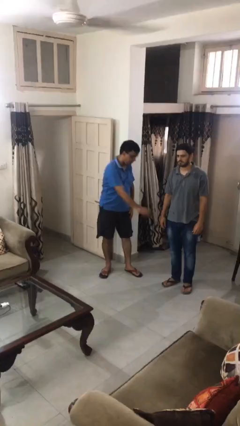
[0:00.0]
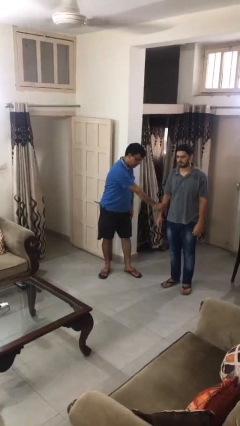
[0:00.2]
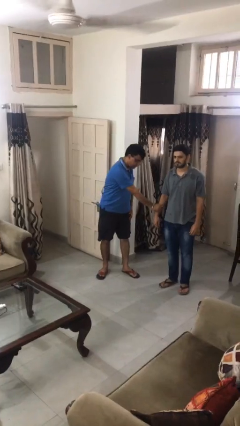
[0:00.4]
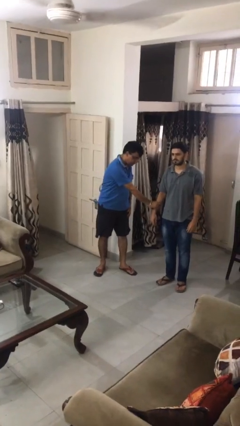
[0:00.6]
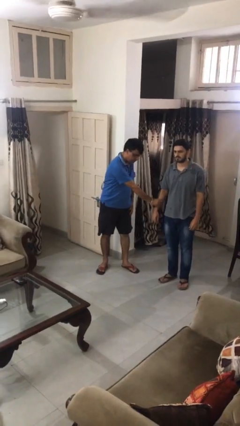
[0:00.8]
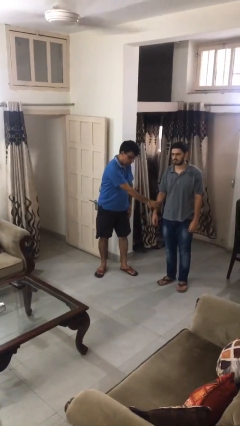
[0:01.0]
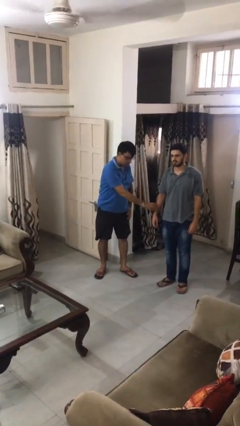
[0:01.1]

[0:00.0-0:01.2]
person grabs person by forearm

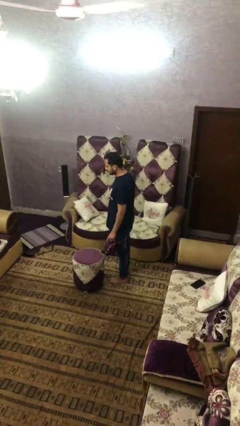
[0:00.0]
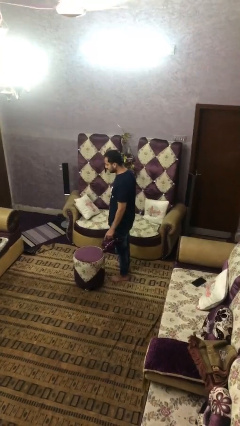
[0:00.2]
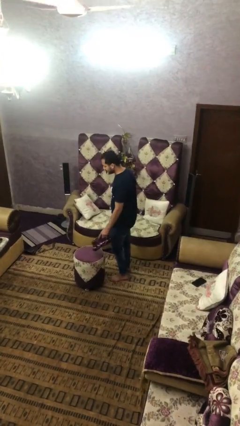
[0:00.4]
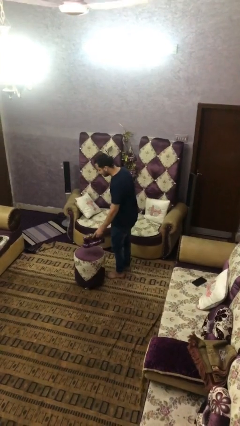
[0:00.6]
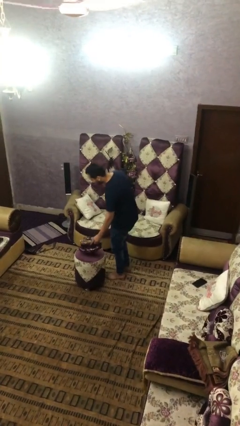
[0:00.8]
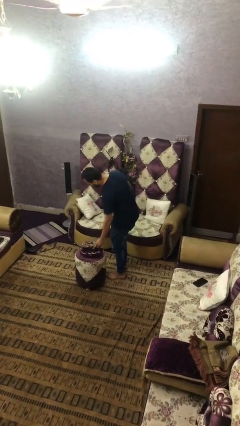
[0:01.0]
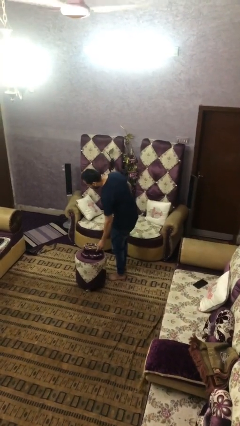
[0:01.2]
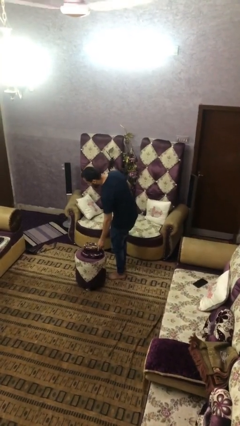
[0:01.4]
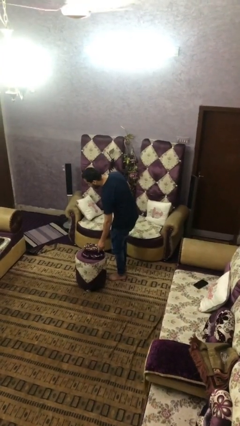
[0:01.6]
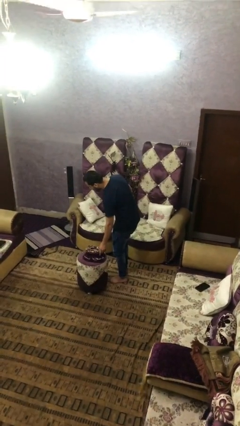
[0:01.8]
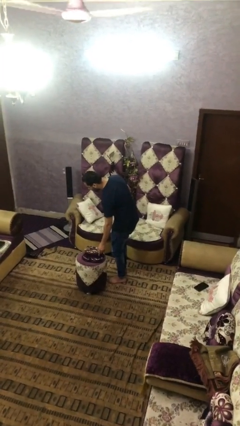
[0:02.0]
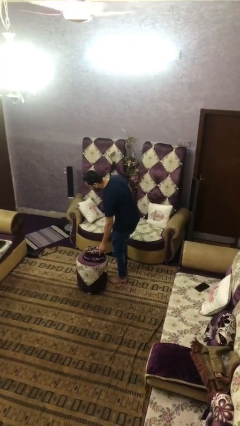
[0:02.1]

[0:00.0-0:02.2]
person puts down object on table

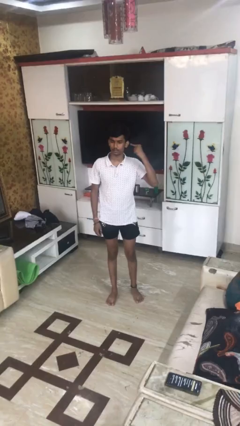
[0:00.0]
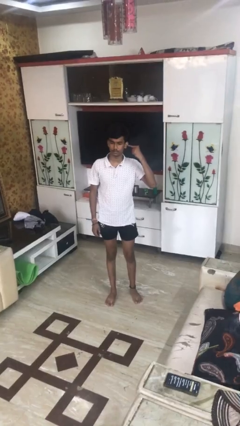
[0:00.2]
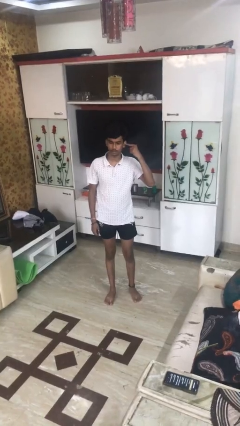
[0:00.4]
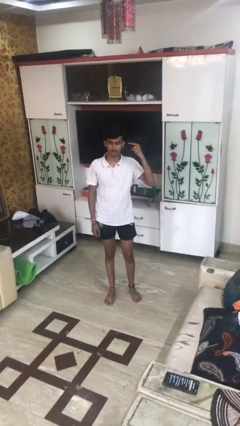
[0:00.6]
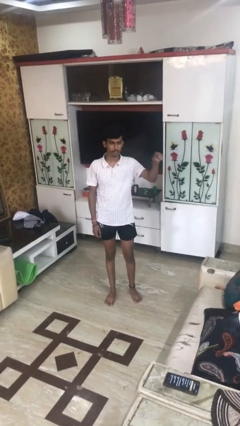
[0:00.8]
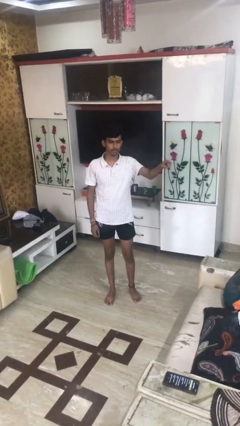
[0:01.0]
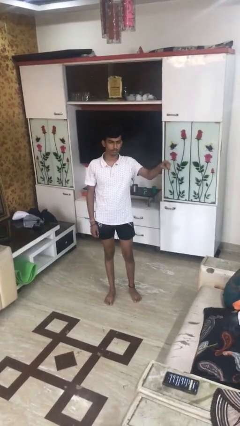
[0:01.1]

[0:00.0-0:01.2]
person gestures listen closely

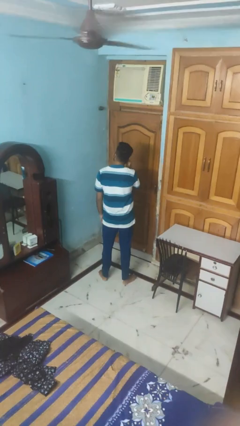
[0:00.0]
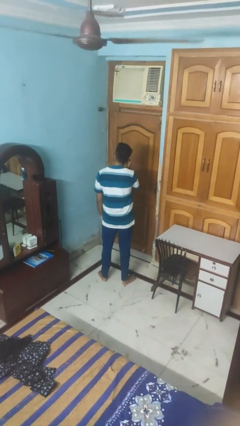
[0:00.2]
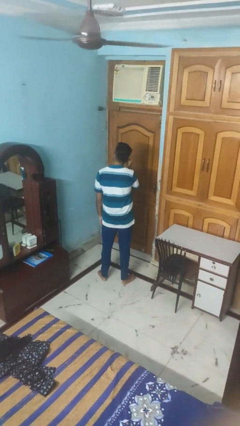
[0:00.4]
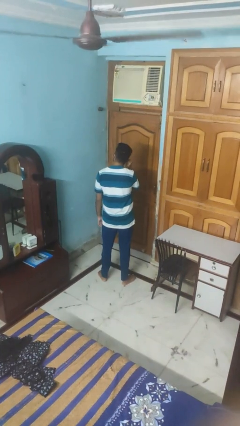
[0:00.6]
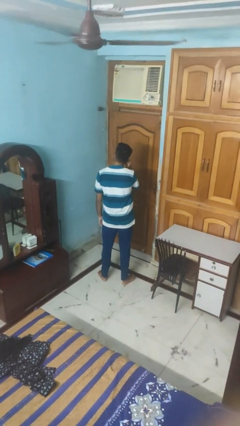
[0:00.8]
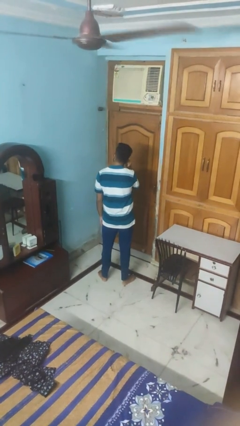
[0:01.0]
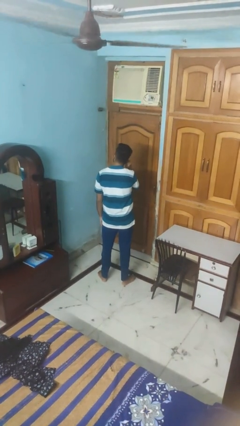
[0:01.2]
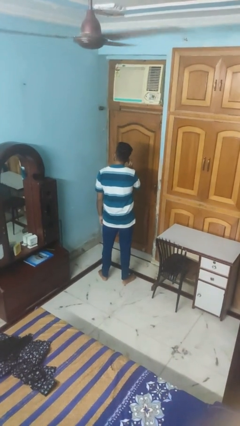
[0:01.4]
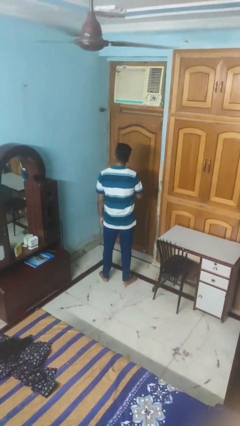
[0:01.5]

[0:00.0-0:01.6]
person touches earlobe

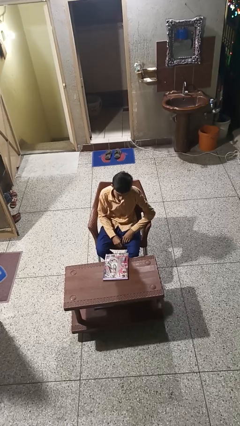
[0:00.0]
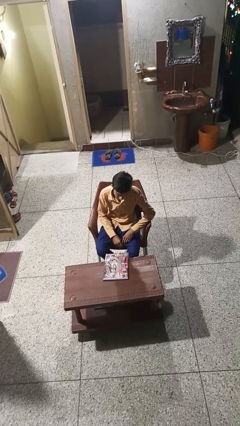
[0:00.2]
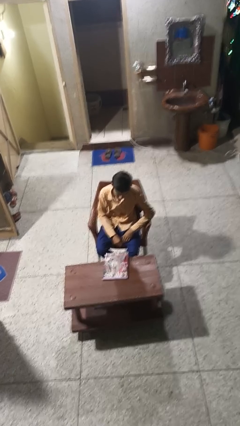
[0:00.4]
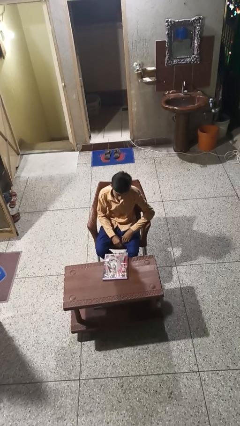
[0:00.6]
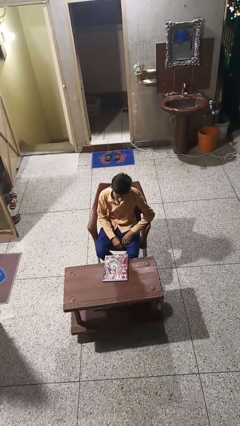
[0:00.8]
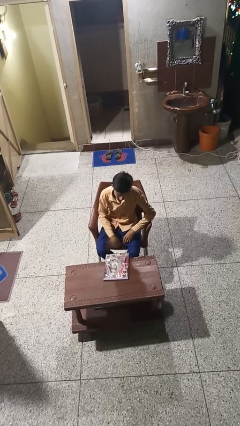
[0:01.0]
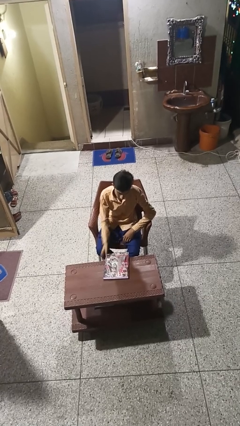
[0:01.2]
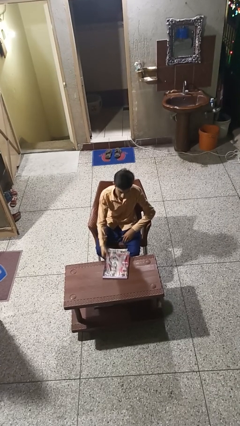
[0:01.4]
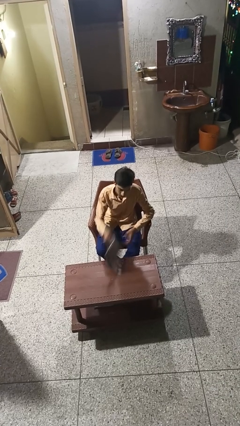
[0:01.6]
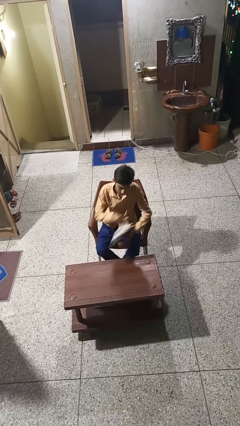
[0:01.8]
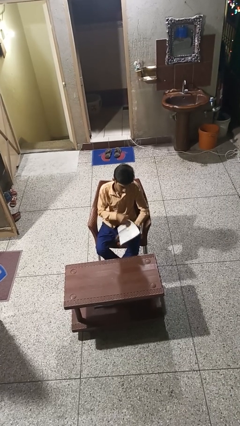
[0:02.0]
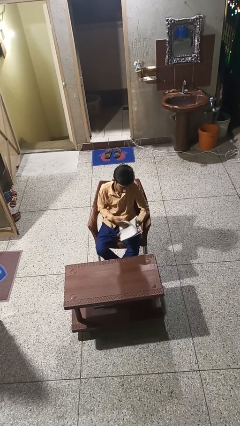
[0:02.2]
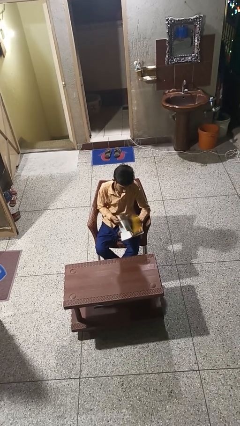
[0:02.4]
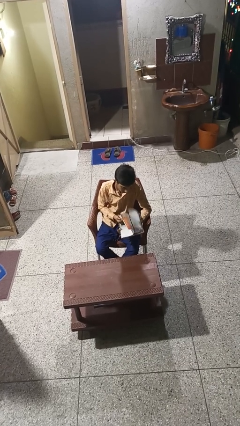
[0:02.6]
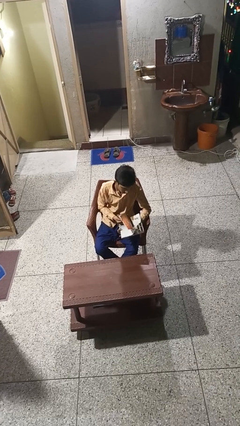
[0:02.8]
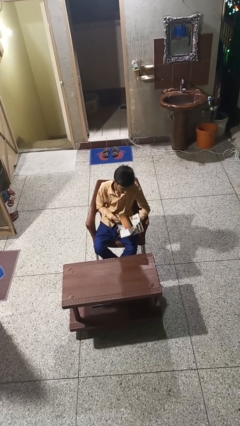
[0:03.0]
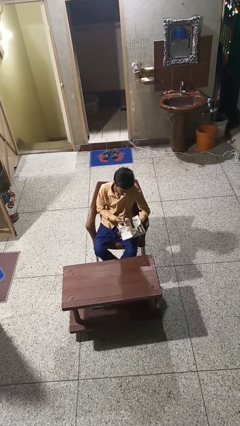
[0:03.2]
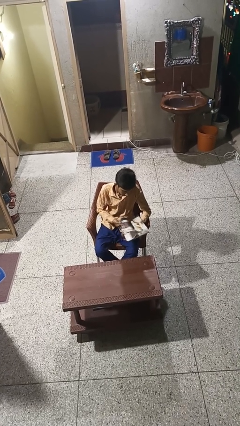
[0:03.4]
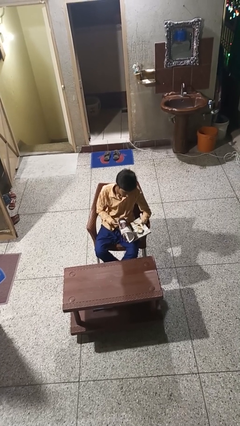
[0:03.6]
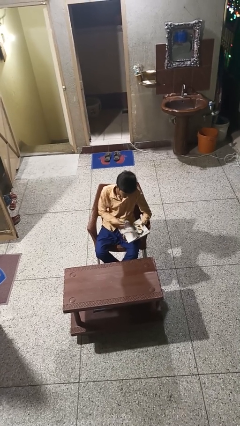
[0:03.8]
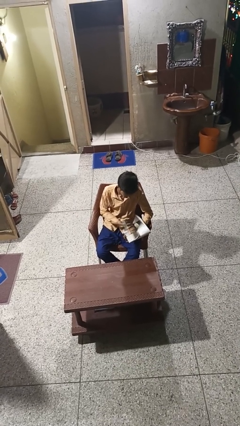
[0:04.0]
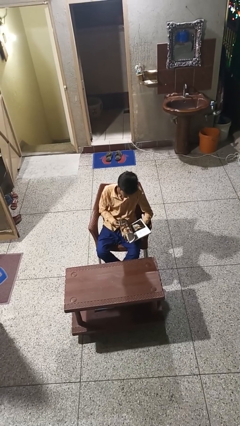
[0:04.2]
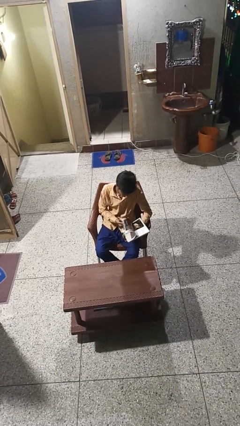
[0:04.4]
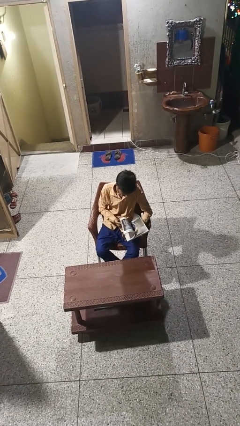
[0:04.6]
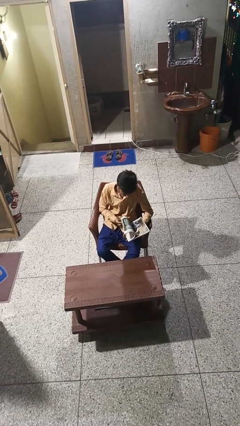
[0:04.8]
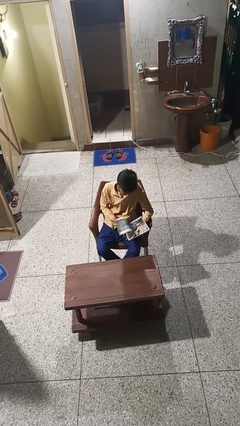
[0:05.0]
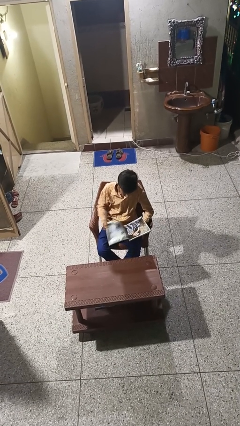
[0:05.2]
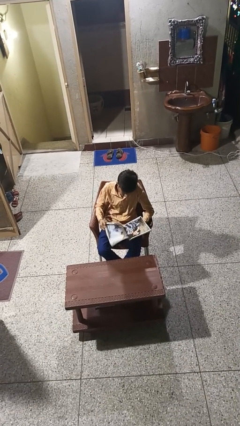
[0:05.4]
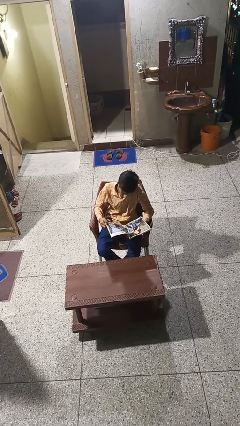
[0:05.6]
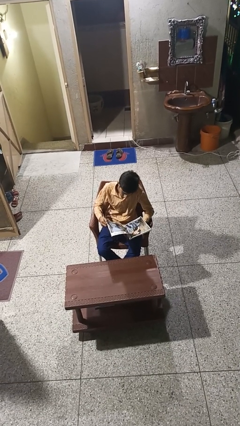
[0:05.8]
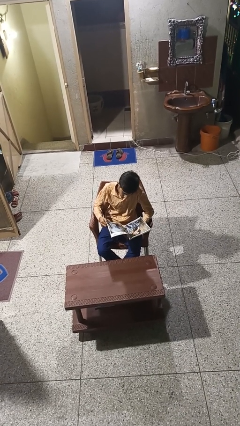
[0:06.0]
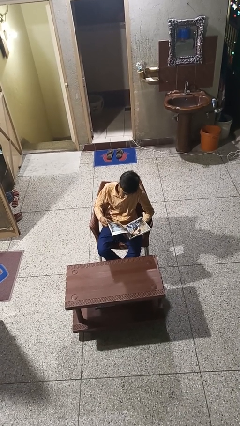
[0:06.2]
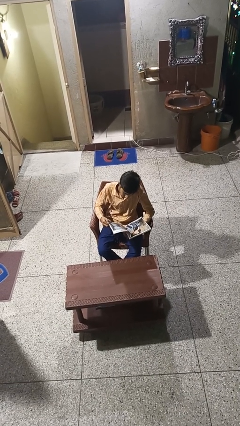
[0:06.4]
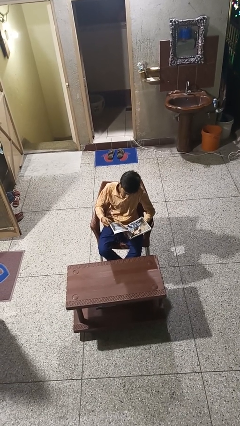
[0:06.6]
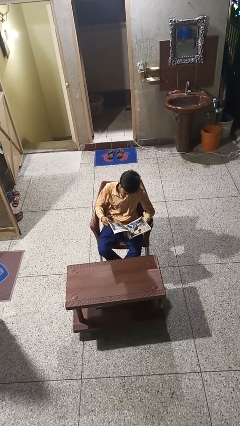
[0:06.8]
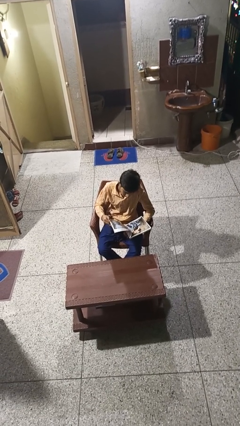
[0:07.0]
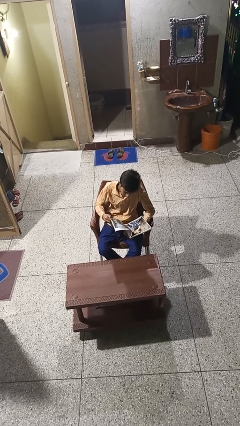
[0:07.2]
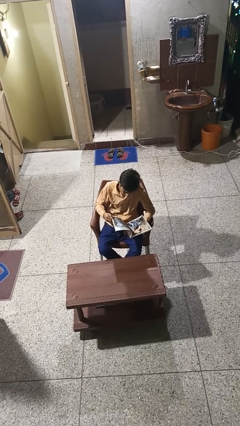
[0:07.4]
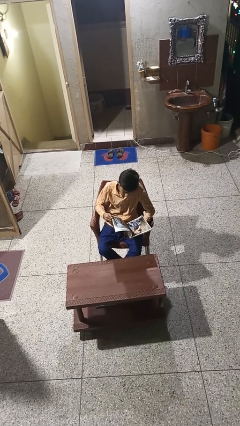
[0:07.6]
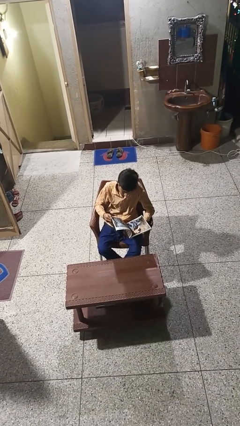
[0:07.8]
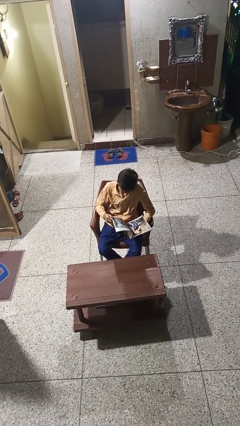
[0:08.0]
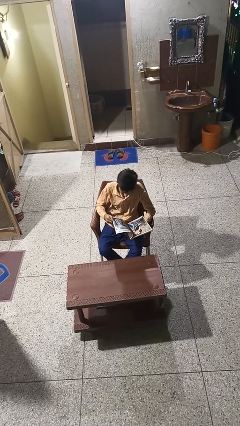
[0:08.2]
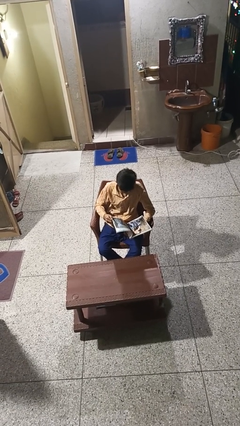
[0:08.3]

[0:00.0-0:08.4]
person reads magazine

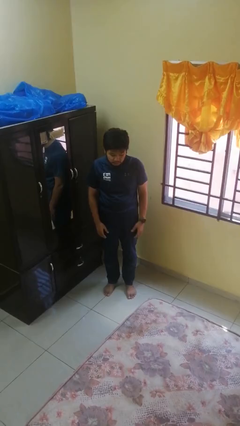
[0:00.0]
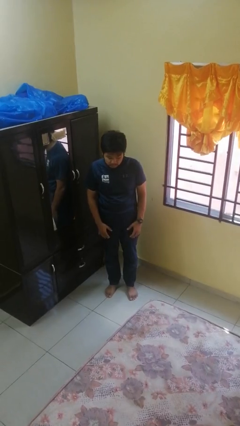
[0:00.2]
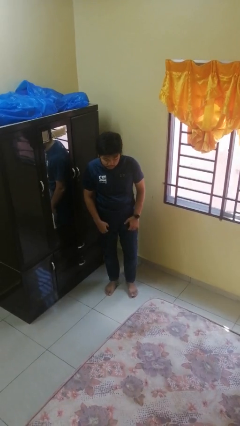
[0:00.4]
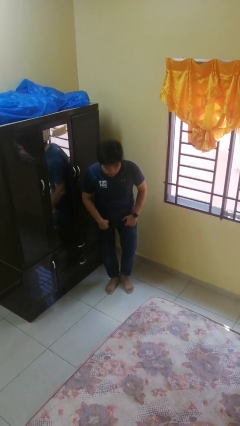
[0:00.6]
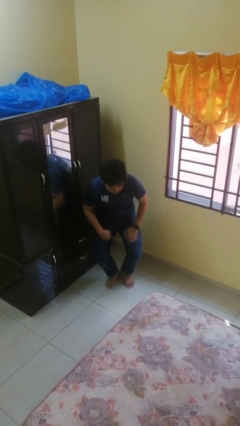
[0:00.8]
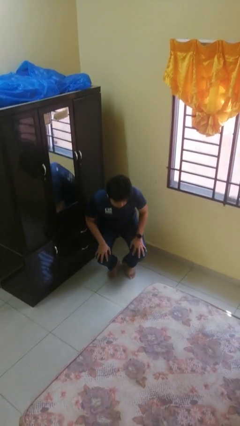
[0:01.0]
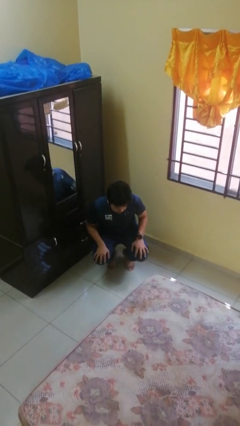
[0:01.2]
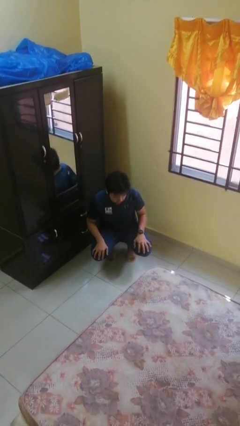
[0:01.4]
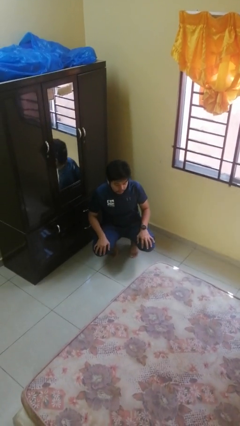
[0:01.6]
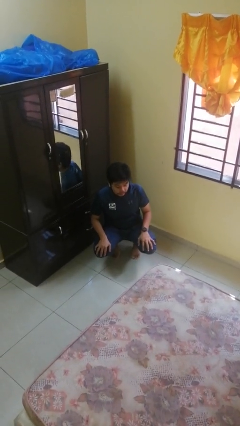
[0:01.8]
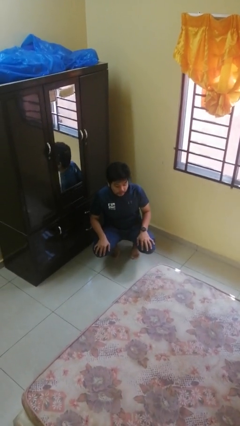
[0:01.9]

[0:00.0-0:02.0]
person squats

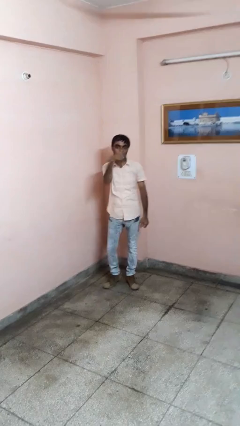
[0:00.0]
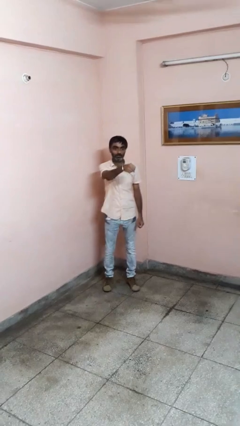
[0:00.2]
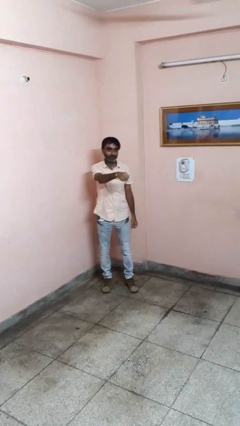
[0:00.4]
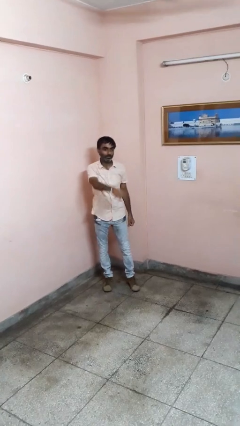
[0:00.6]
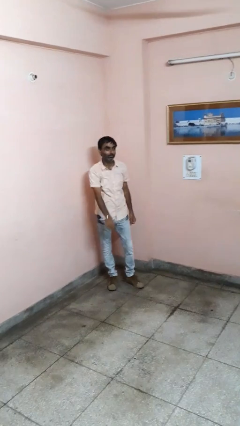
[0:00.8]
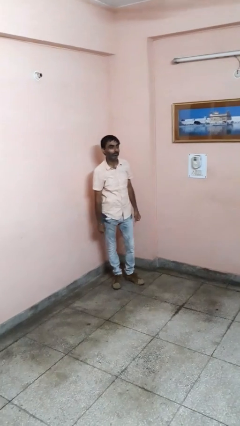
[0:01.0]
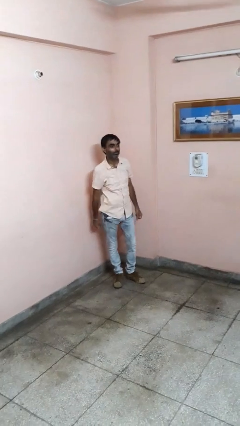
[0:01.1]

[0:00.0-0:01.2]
person punches
